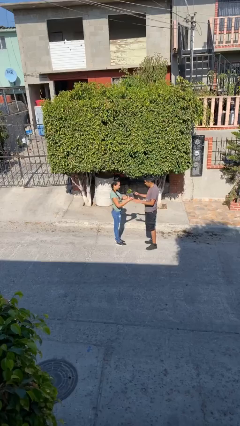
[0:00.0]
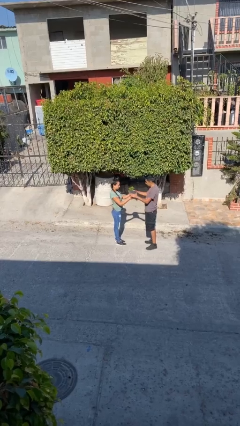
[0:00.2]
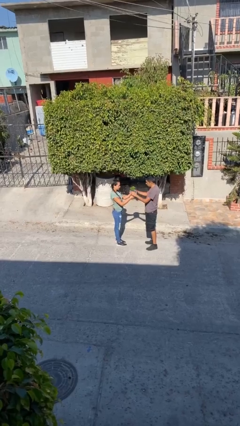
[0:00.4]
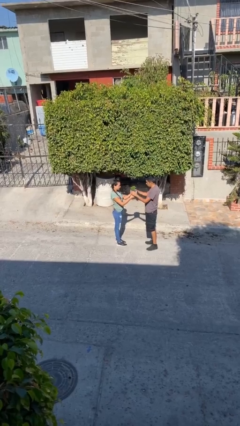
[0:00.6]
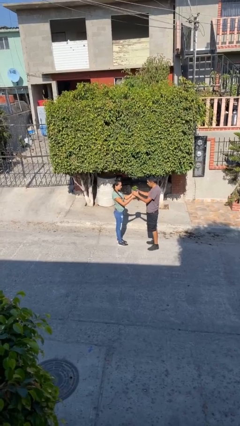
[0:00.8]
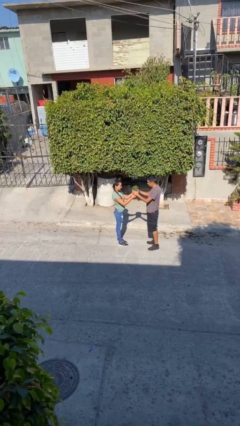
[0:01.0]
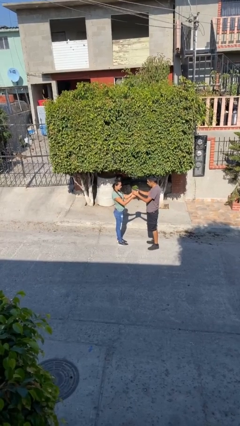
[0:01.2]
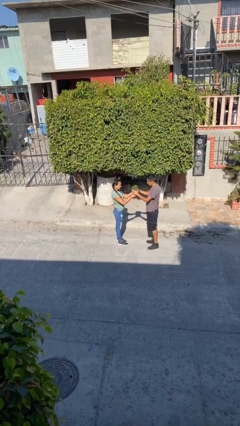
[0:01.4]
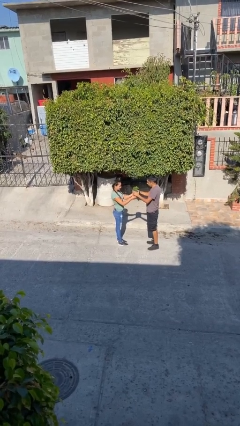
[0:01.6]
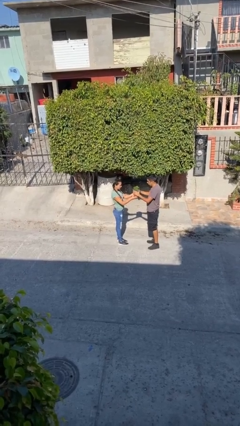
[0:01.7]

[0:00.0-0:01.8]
person transfers object to person

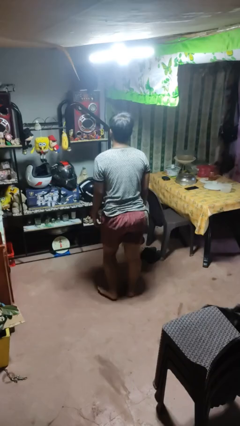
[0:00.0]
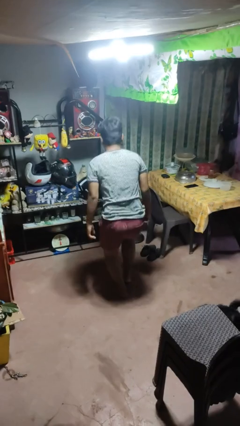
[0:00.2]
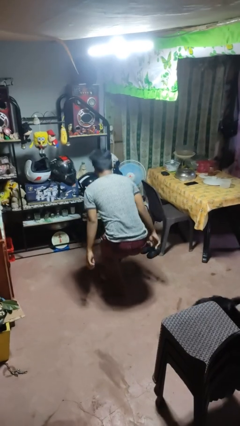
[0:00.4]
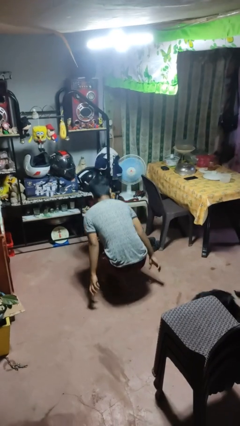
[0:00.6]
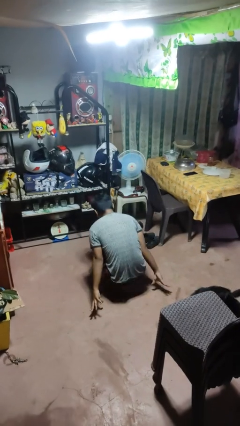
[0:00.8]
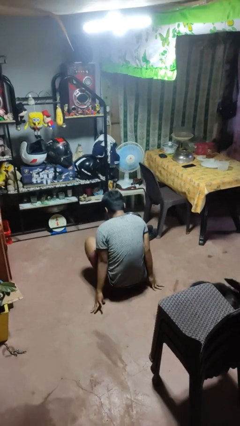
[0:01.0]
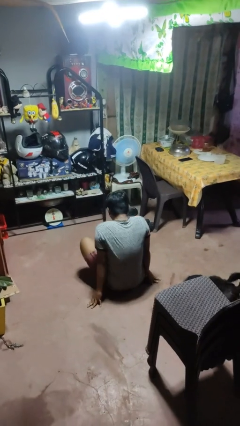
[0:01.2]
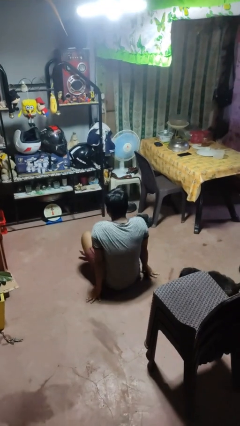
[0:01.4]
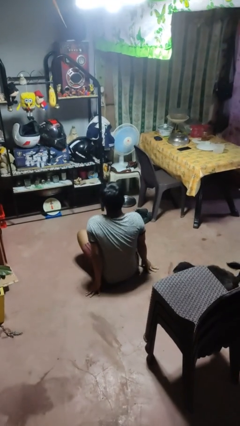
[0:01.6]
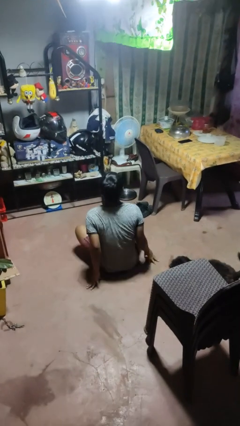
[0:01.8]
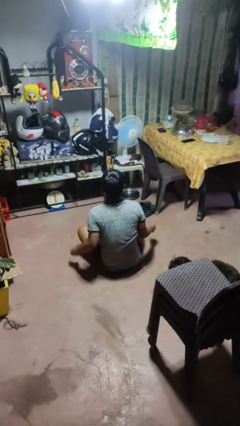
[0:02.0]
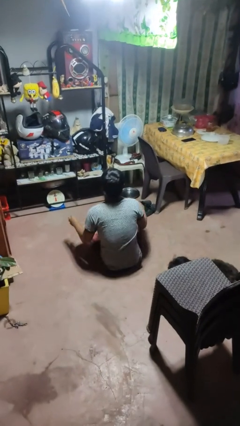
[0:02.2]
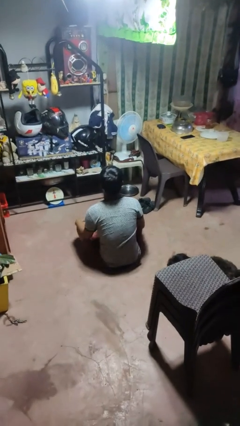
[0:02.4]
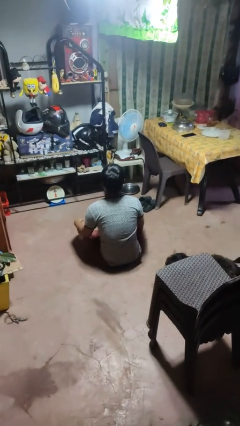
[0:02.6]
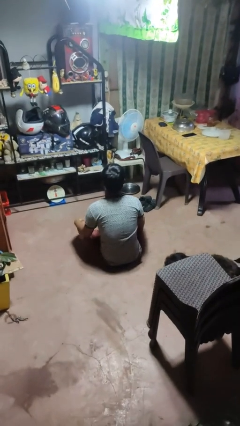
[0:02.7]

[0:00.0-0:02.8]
person sits crisscross

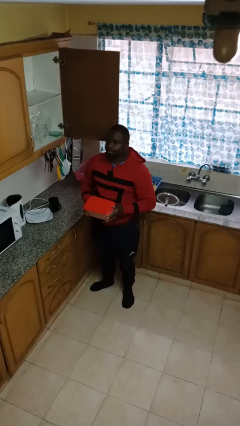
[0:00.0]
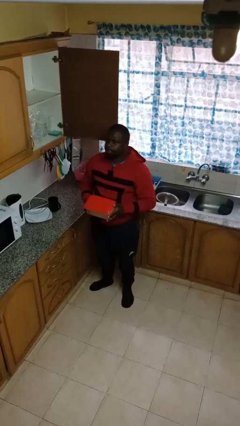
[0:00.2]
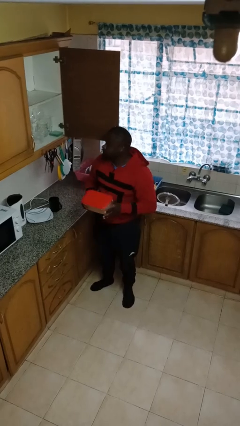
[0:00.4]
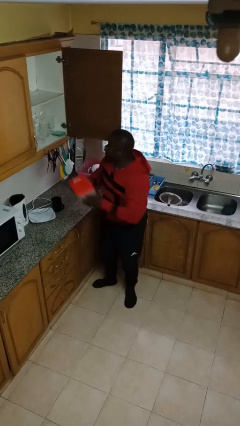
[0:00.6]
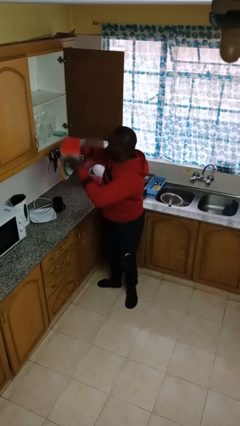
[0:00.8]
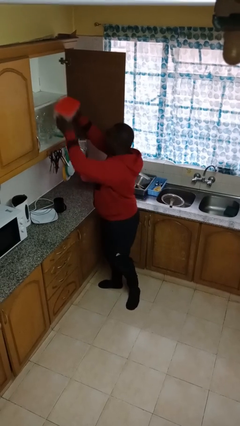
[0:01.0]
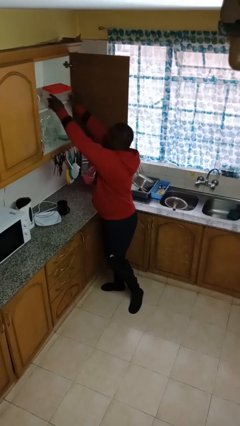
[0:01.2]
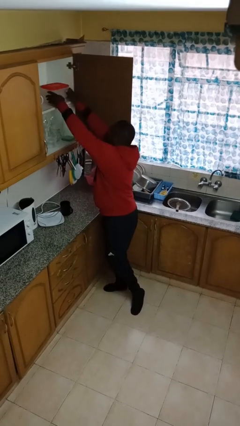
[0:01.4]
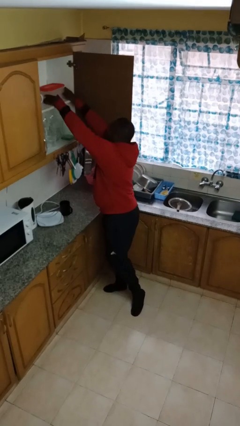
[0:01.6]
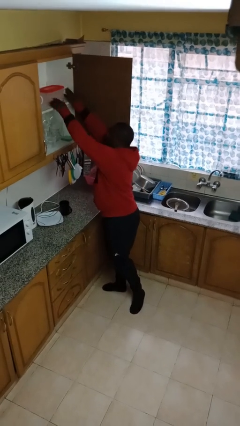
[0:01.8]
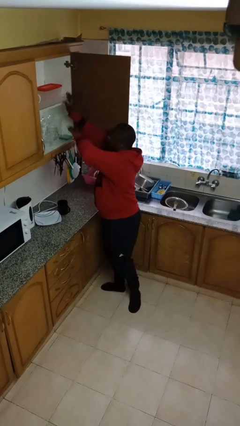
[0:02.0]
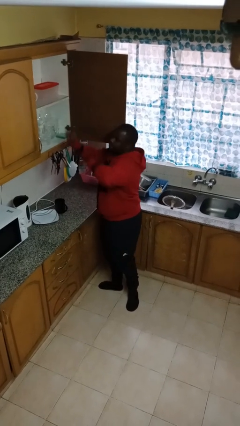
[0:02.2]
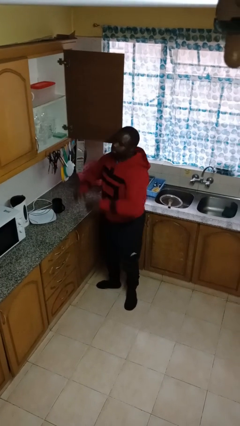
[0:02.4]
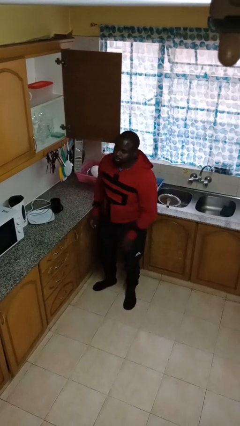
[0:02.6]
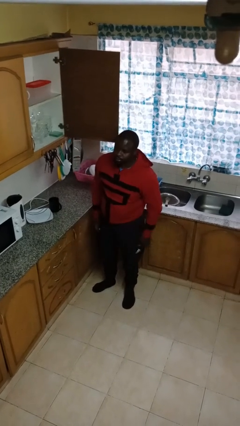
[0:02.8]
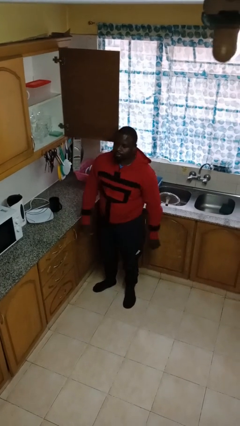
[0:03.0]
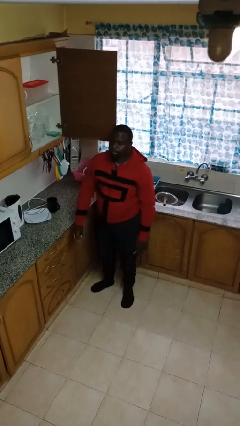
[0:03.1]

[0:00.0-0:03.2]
person puts down object into cabinet

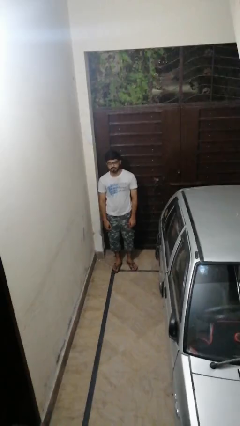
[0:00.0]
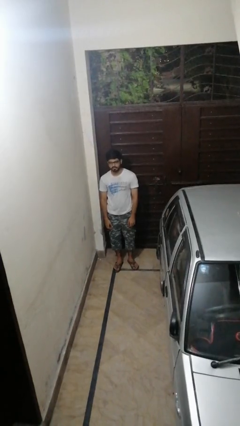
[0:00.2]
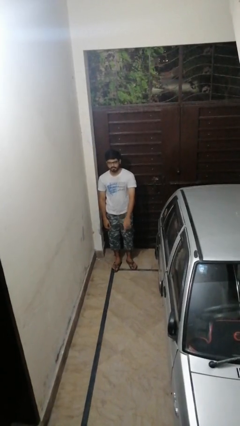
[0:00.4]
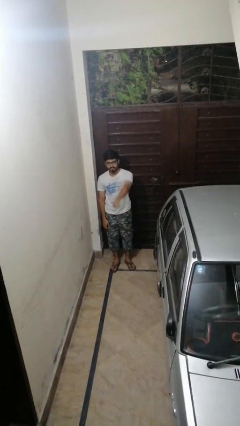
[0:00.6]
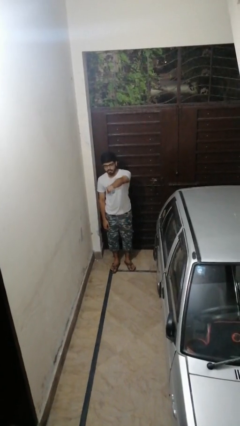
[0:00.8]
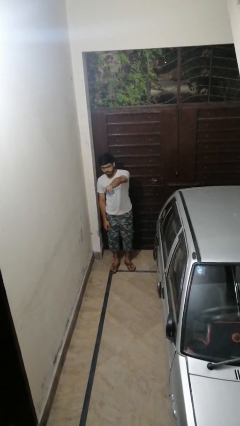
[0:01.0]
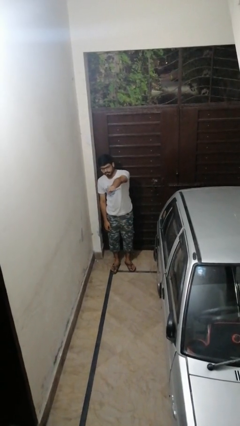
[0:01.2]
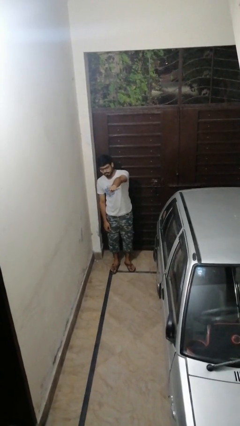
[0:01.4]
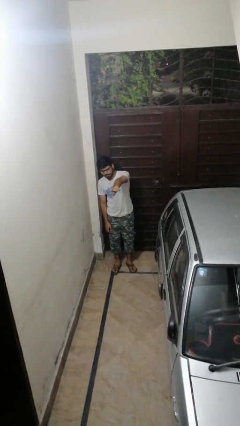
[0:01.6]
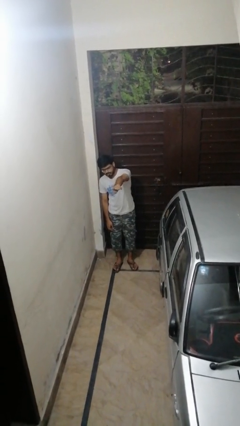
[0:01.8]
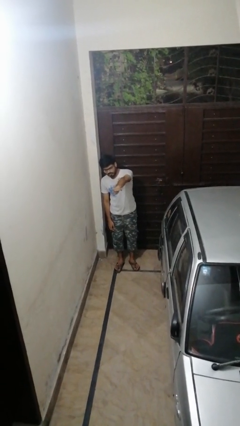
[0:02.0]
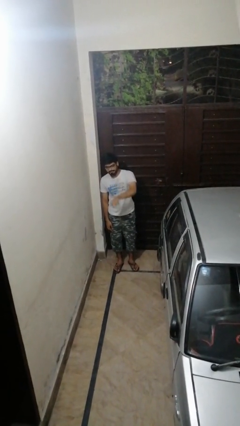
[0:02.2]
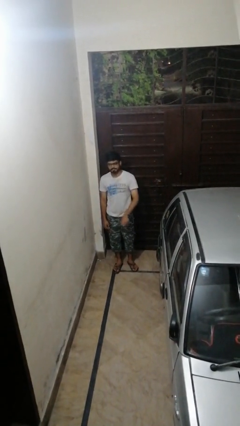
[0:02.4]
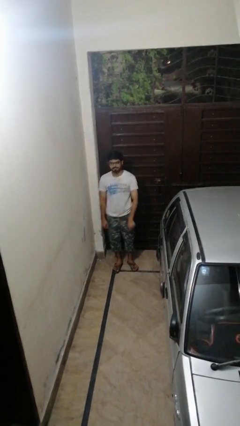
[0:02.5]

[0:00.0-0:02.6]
person points at person

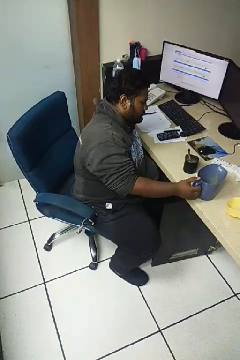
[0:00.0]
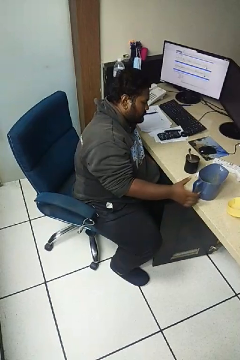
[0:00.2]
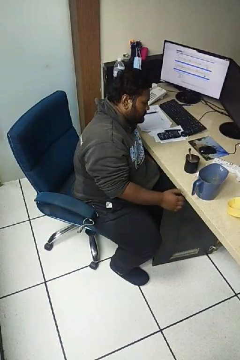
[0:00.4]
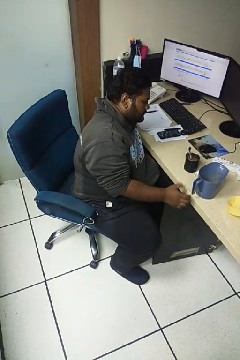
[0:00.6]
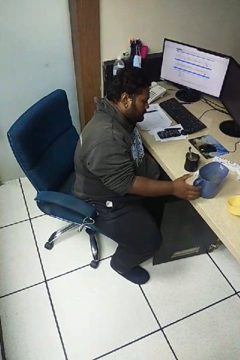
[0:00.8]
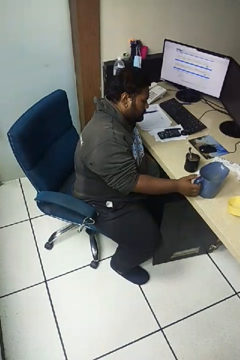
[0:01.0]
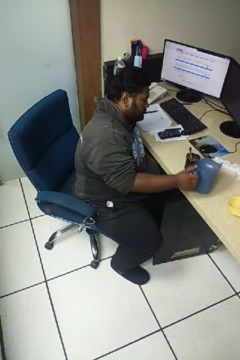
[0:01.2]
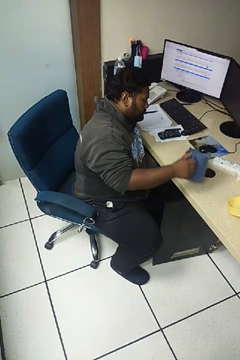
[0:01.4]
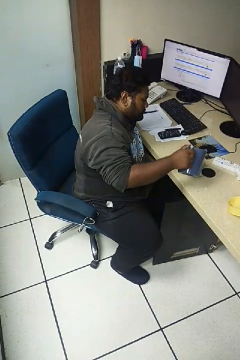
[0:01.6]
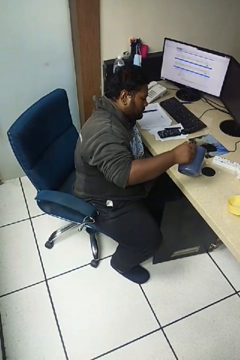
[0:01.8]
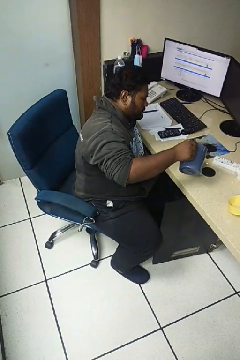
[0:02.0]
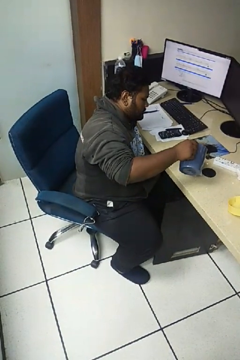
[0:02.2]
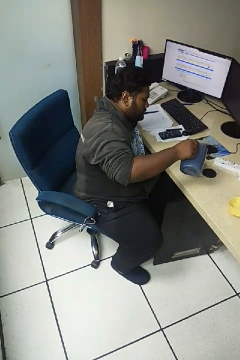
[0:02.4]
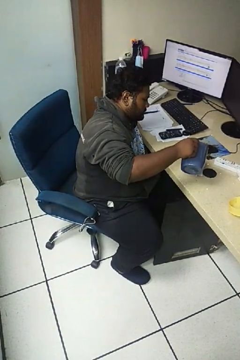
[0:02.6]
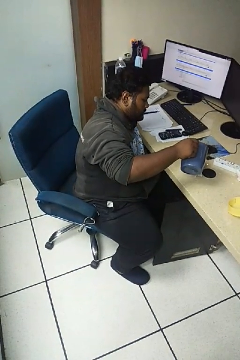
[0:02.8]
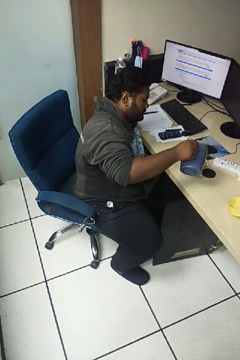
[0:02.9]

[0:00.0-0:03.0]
person pours coffee into mug

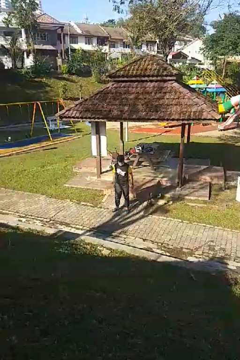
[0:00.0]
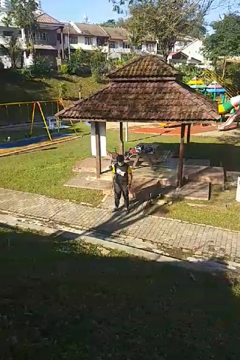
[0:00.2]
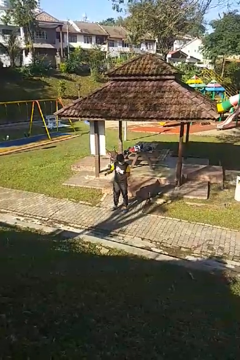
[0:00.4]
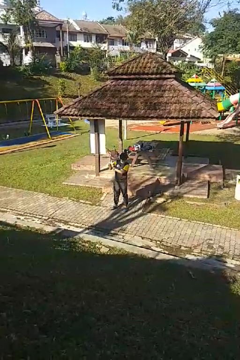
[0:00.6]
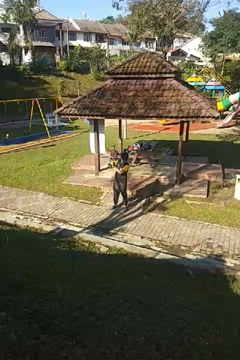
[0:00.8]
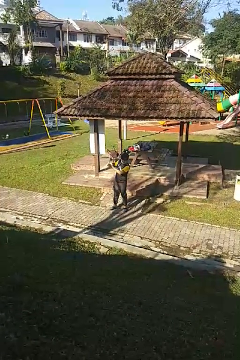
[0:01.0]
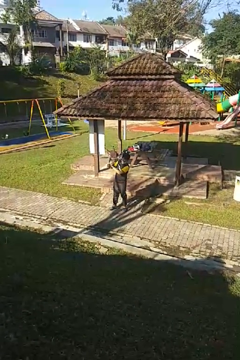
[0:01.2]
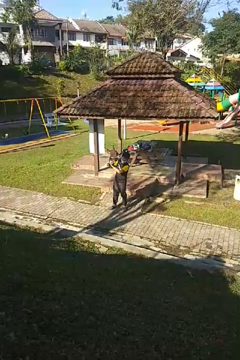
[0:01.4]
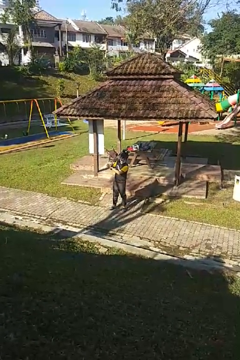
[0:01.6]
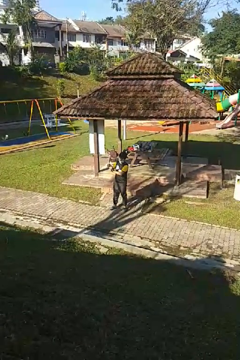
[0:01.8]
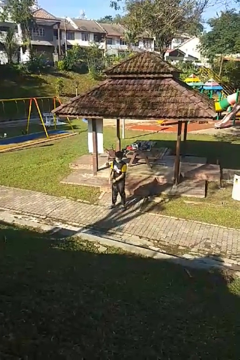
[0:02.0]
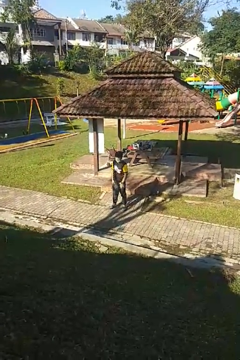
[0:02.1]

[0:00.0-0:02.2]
person claps hands

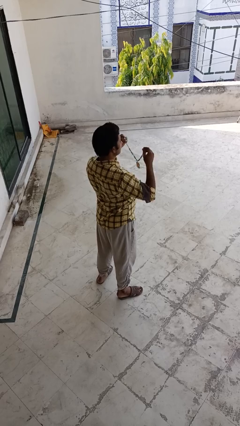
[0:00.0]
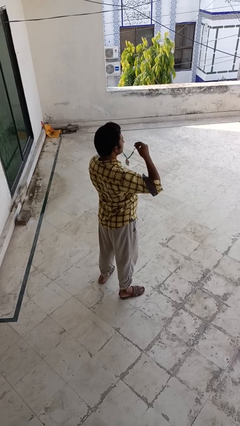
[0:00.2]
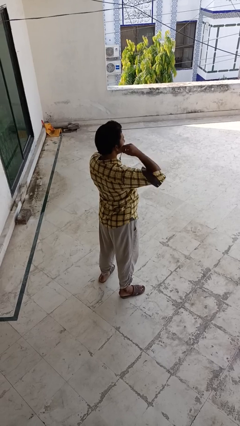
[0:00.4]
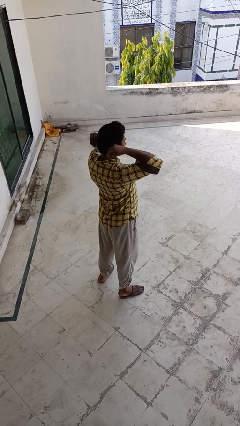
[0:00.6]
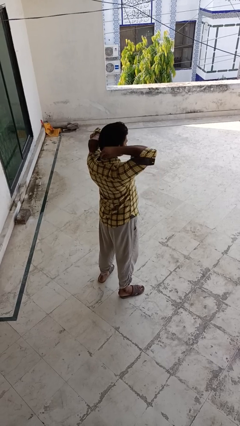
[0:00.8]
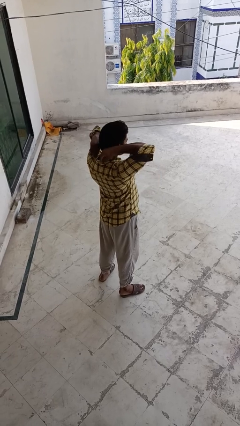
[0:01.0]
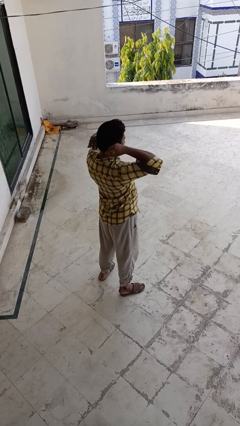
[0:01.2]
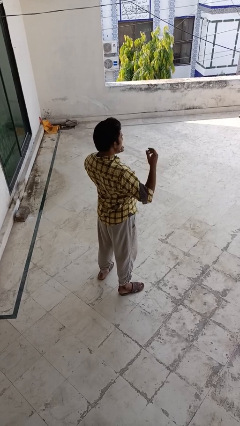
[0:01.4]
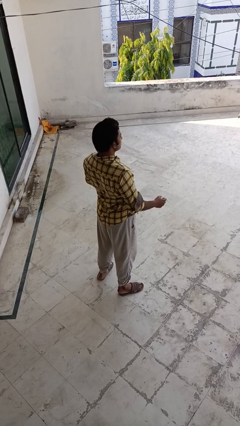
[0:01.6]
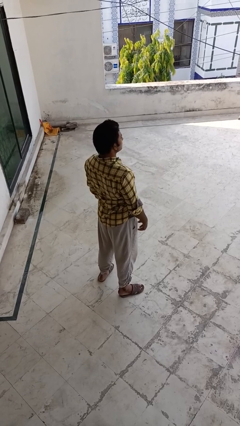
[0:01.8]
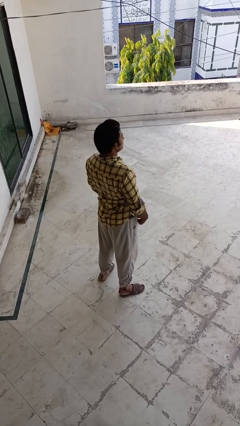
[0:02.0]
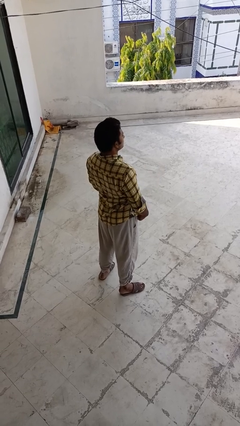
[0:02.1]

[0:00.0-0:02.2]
person puts on necklace

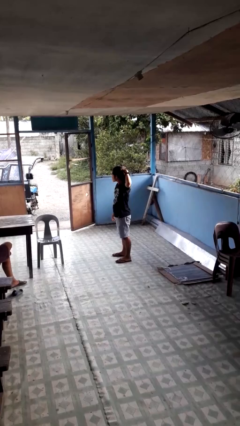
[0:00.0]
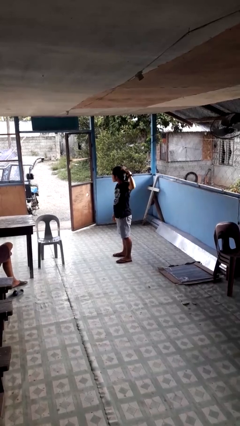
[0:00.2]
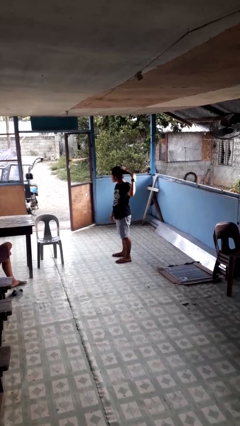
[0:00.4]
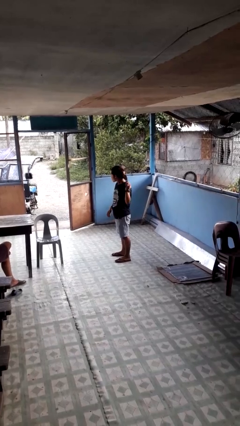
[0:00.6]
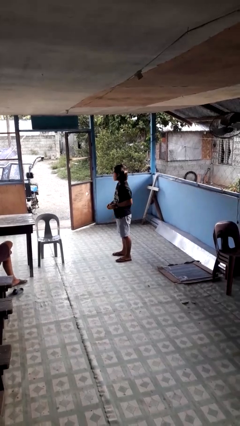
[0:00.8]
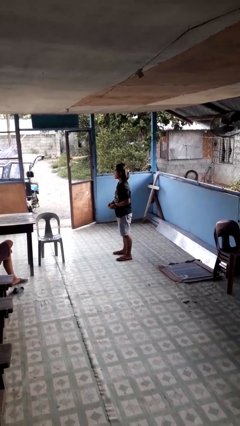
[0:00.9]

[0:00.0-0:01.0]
person takes off hairtie
